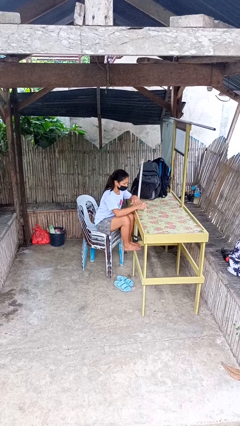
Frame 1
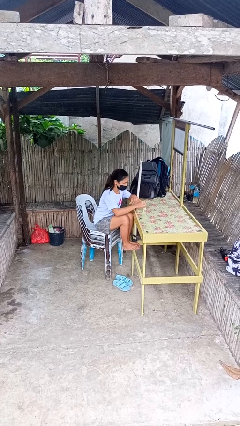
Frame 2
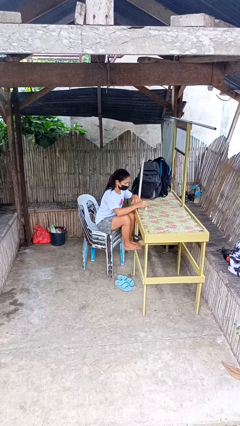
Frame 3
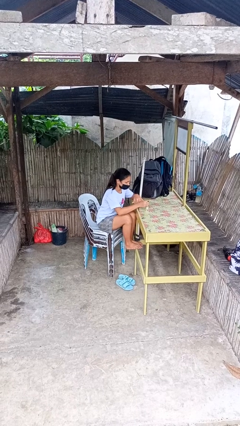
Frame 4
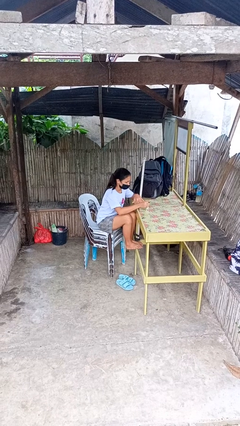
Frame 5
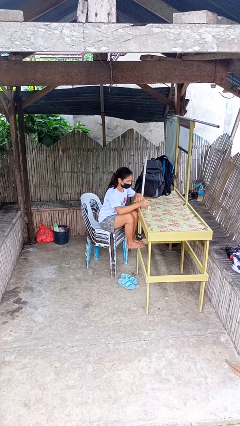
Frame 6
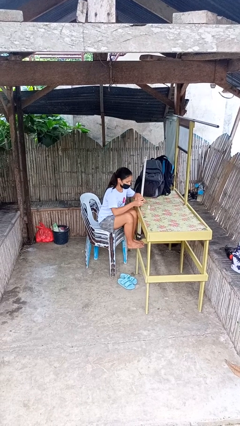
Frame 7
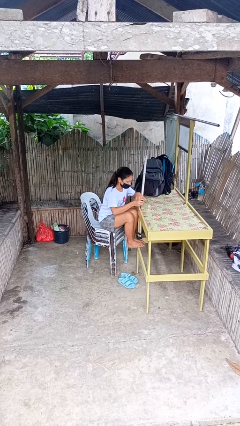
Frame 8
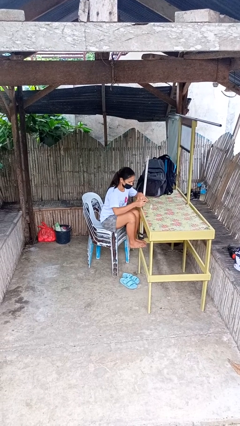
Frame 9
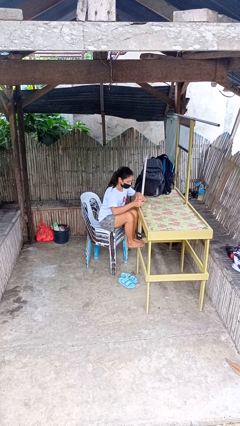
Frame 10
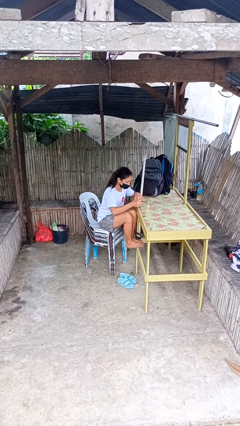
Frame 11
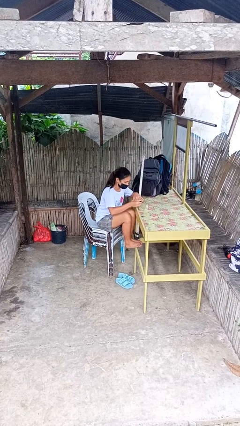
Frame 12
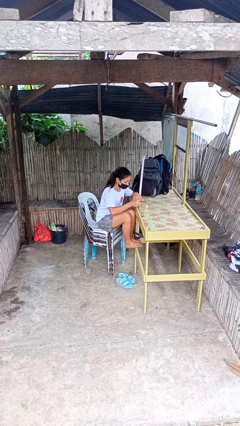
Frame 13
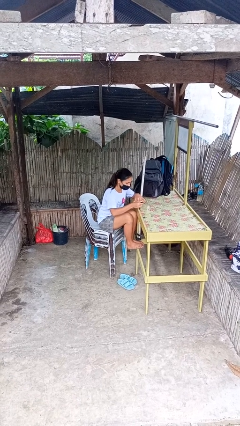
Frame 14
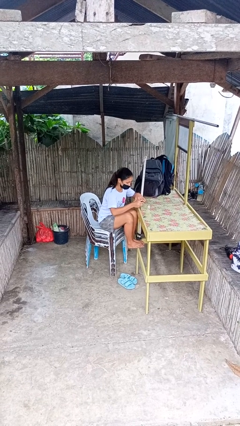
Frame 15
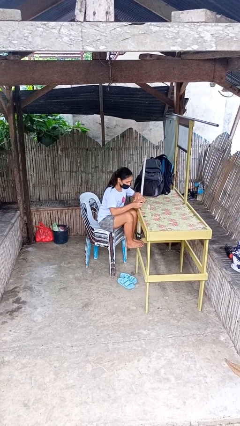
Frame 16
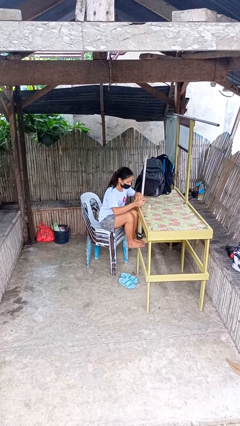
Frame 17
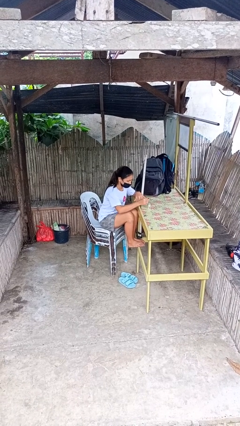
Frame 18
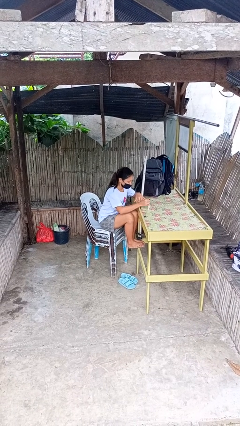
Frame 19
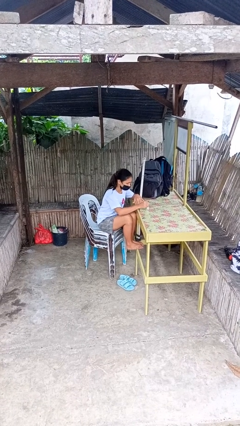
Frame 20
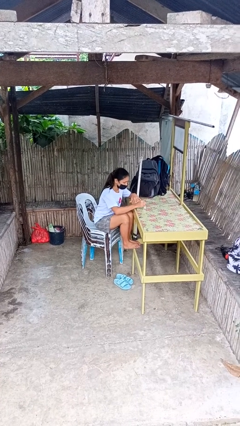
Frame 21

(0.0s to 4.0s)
person paints fingernails

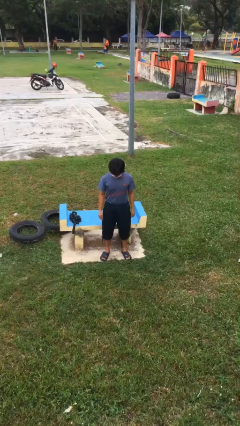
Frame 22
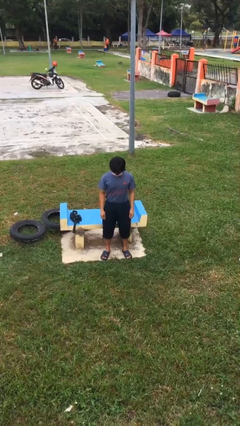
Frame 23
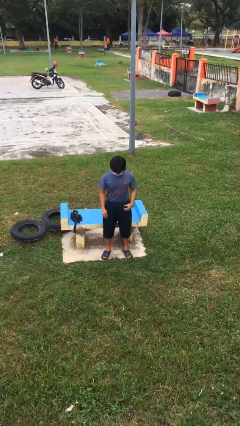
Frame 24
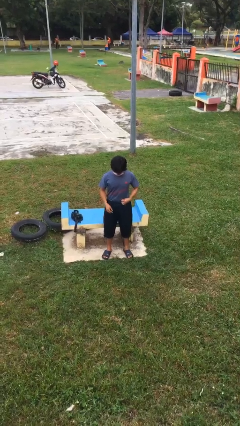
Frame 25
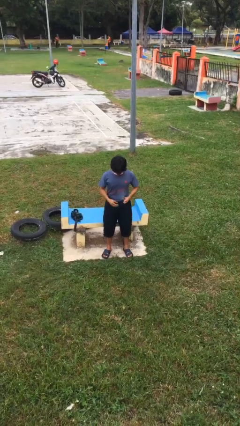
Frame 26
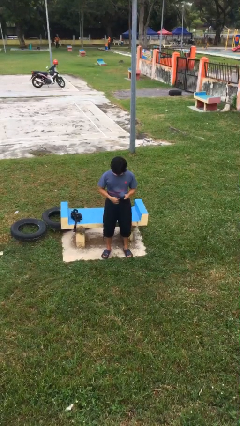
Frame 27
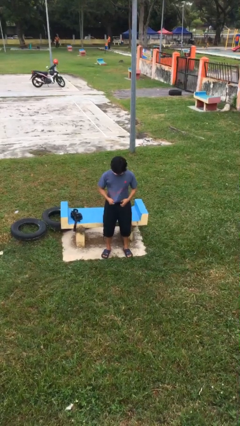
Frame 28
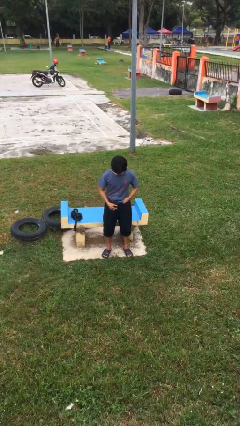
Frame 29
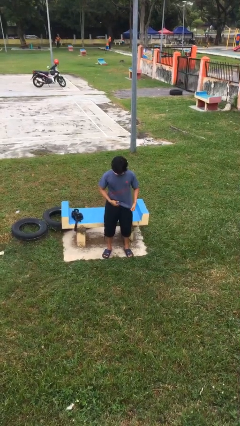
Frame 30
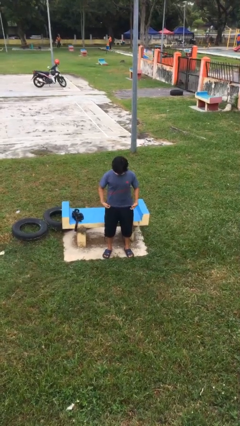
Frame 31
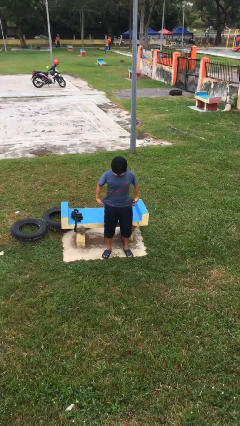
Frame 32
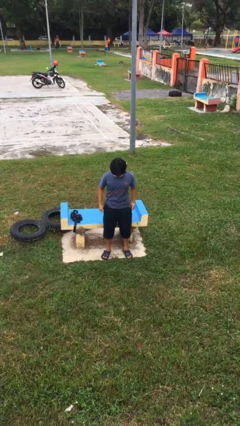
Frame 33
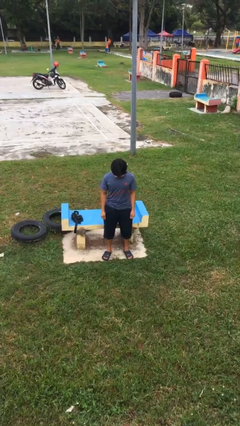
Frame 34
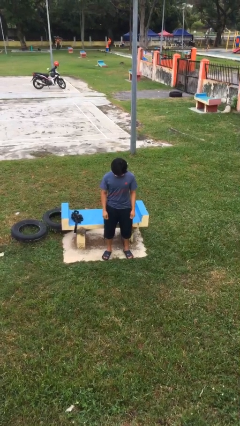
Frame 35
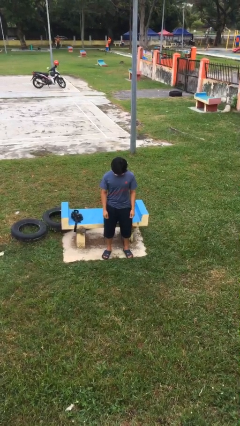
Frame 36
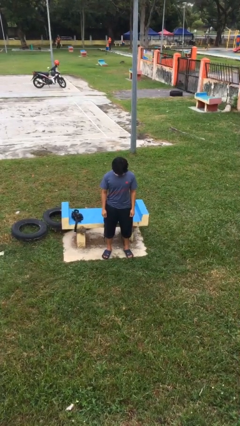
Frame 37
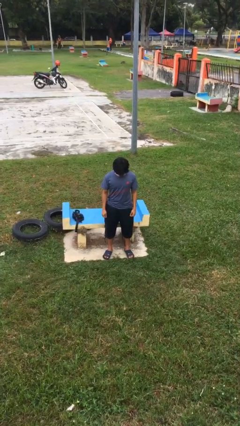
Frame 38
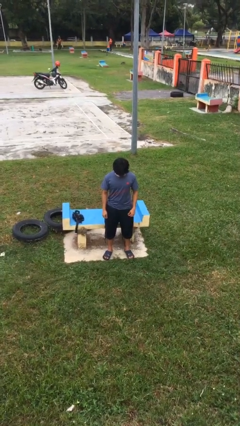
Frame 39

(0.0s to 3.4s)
person untucks shirt

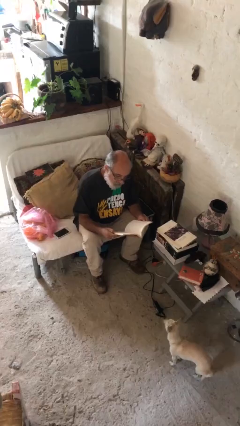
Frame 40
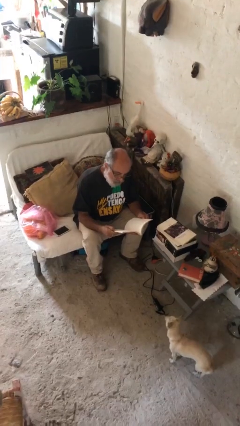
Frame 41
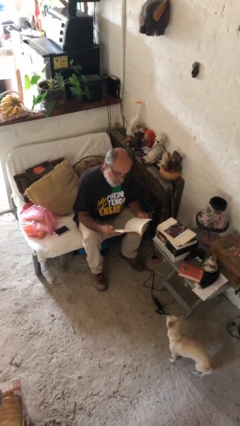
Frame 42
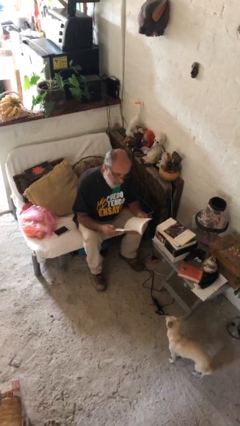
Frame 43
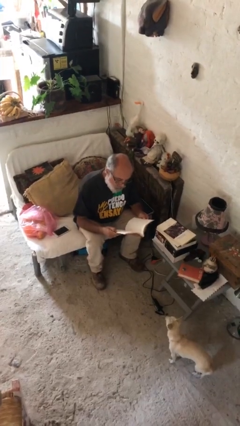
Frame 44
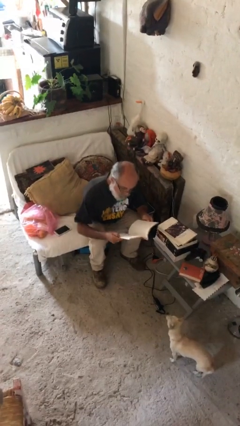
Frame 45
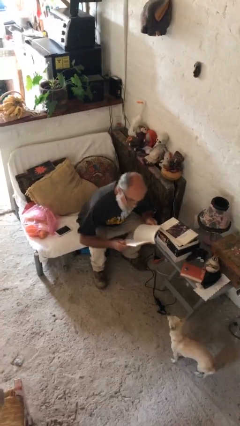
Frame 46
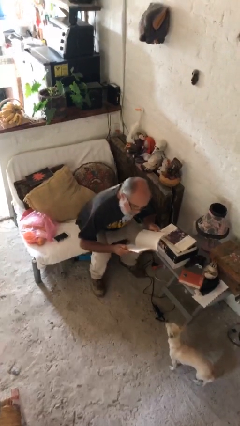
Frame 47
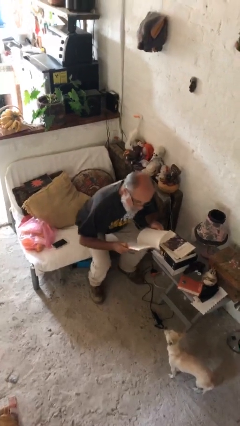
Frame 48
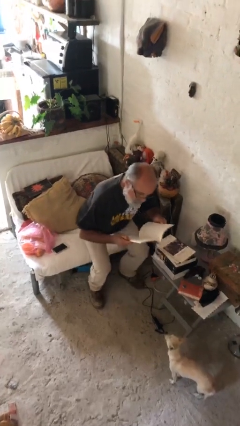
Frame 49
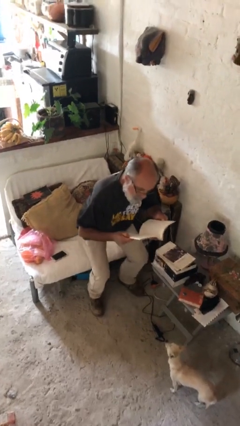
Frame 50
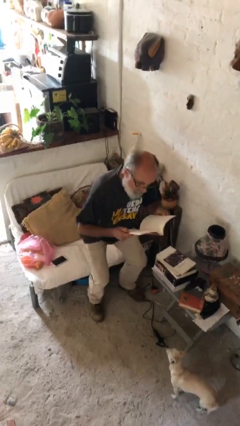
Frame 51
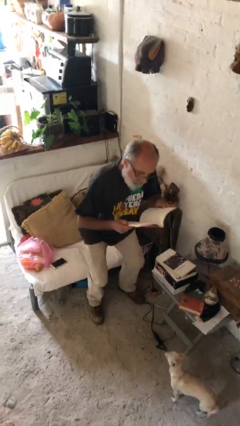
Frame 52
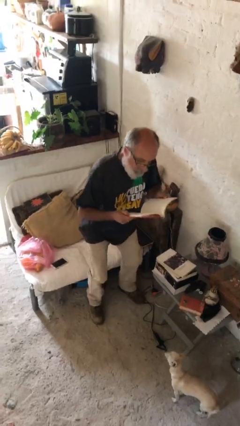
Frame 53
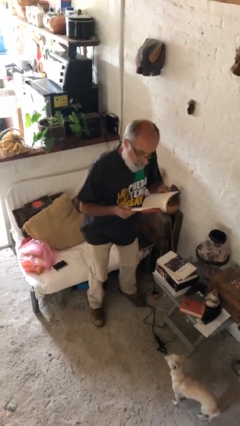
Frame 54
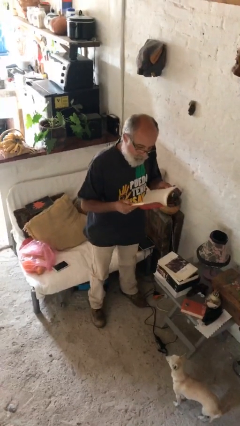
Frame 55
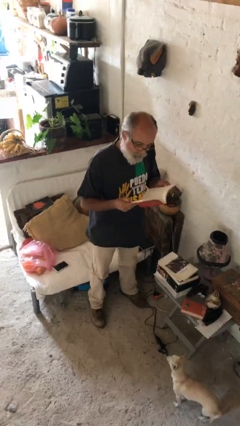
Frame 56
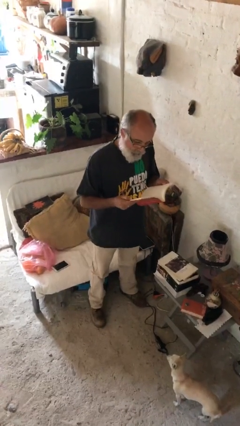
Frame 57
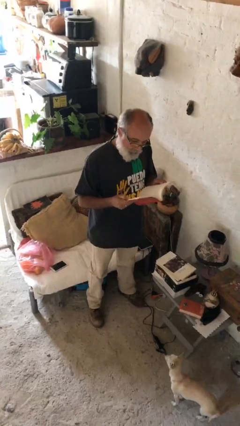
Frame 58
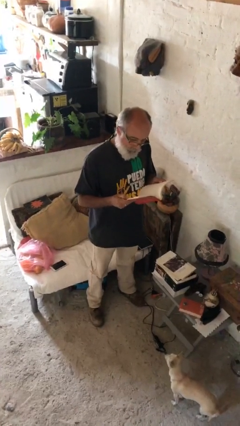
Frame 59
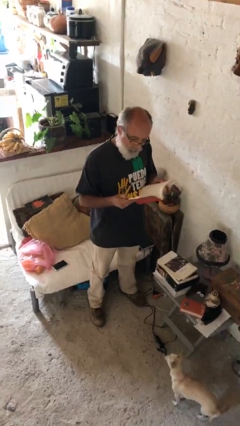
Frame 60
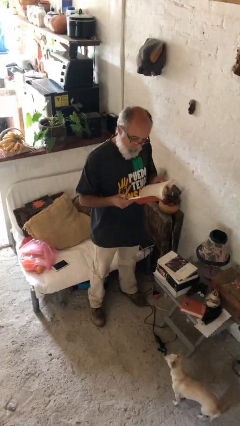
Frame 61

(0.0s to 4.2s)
person stands up

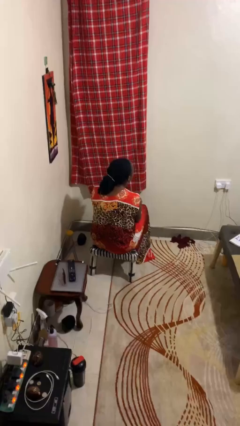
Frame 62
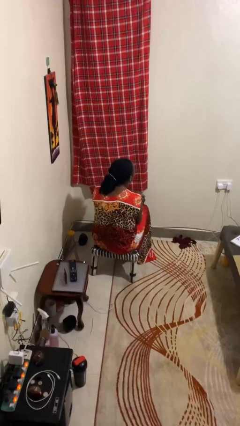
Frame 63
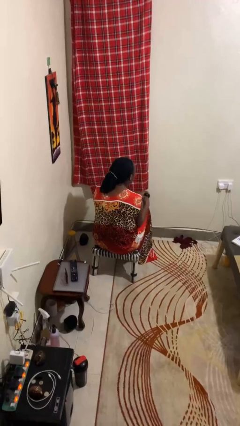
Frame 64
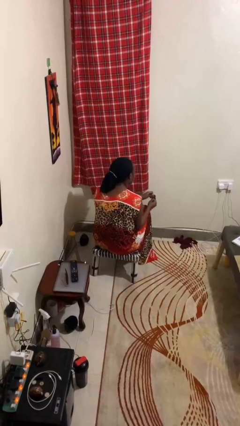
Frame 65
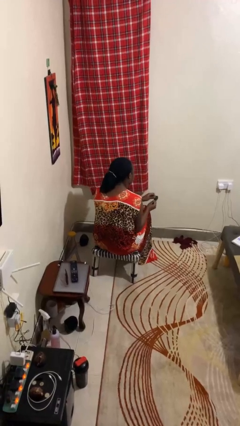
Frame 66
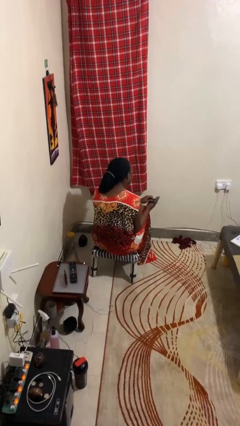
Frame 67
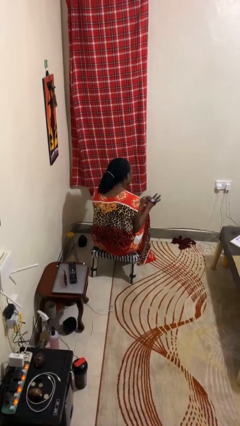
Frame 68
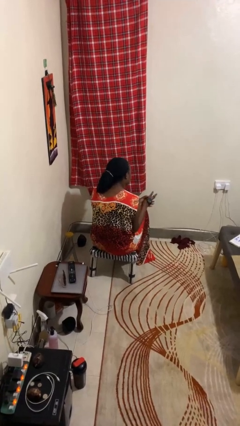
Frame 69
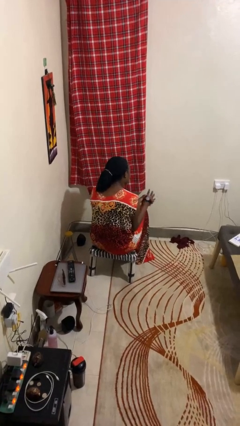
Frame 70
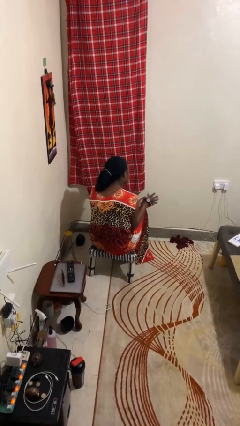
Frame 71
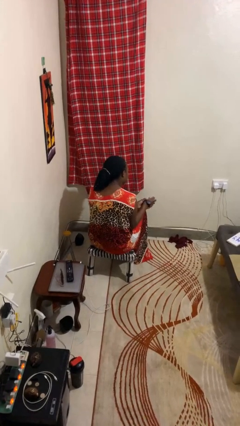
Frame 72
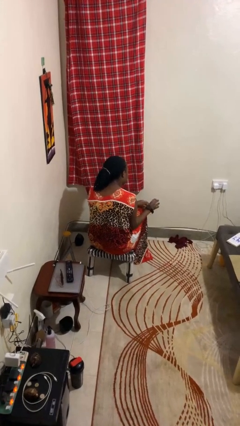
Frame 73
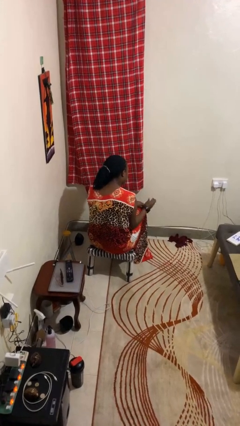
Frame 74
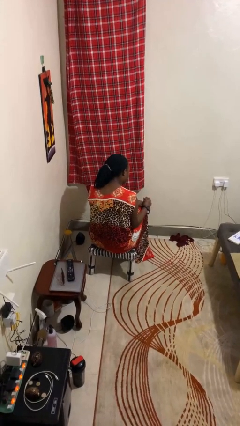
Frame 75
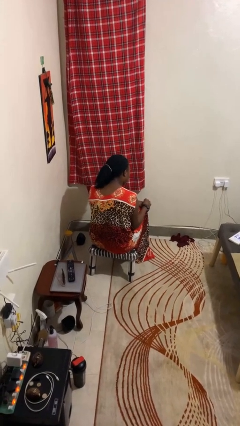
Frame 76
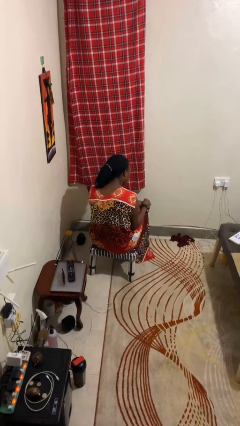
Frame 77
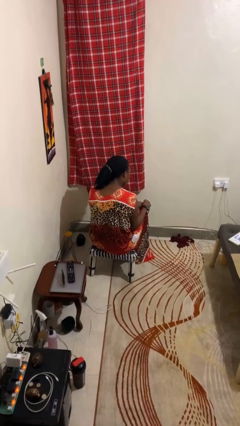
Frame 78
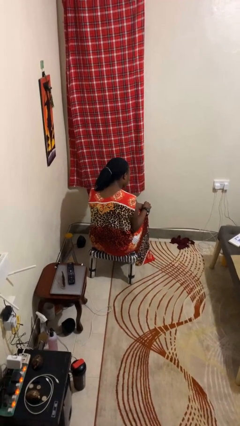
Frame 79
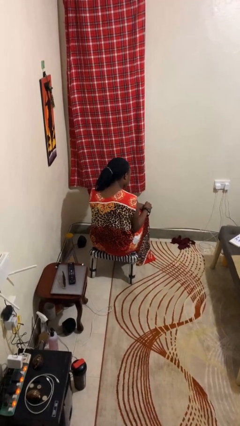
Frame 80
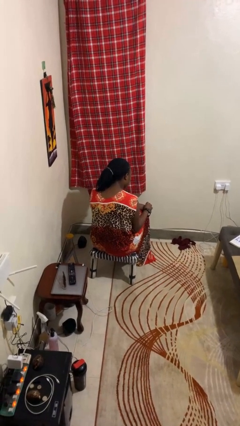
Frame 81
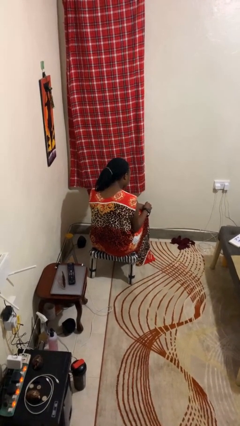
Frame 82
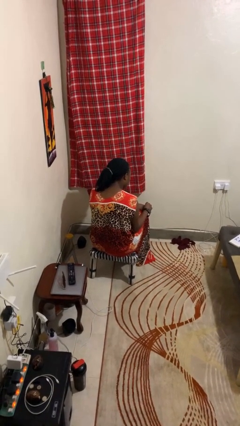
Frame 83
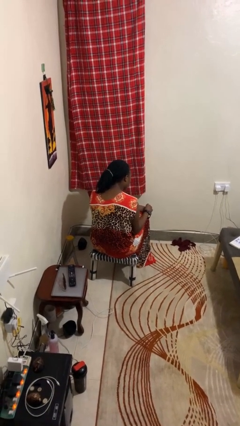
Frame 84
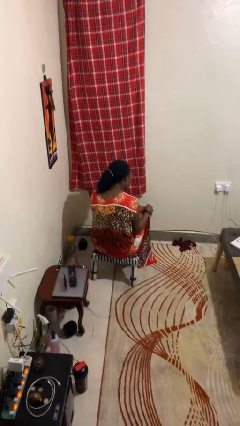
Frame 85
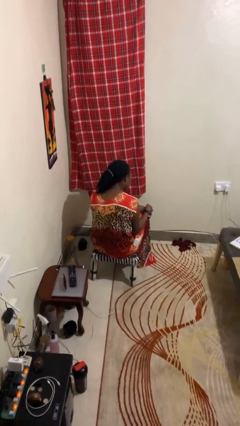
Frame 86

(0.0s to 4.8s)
person puts on wristwatch

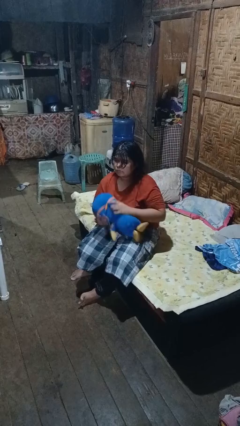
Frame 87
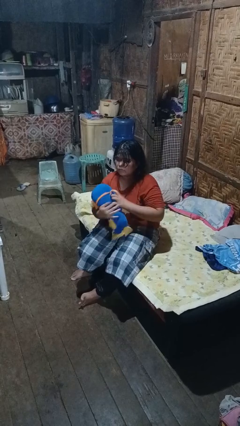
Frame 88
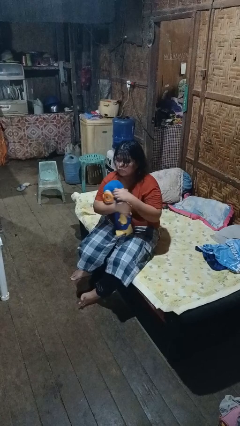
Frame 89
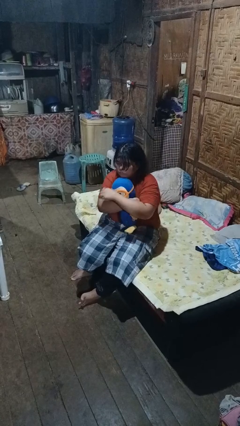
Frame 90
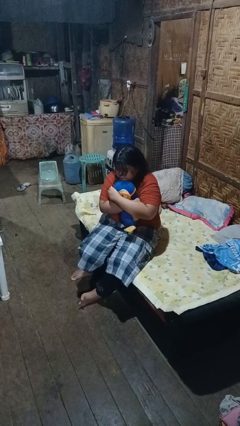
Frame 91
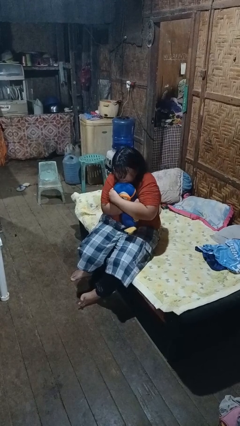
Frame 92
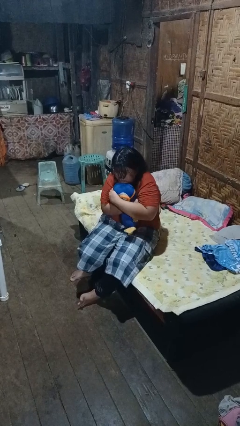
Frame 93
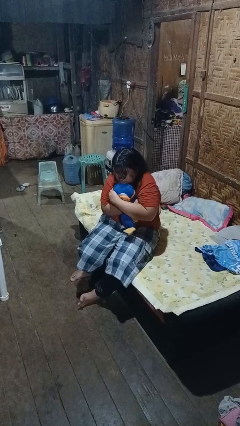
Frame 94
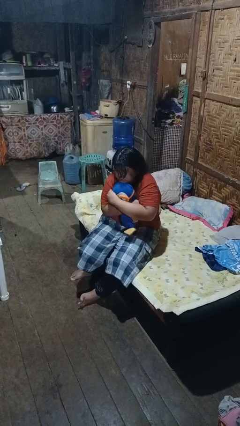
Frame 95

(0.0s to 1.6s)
person hugs stuffed animal
